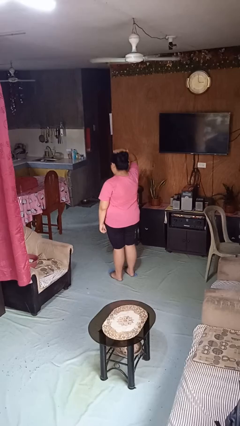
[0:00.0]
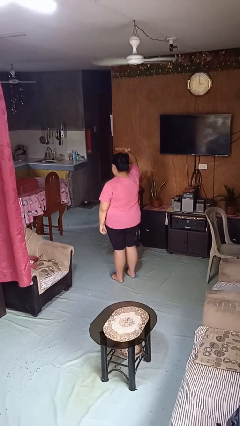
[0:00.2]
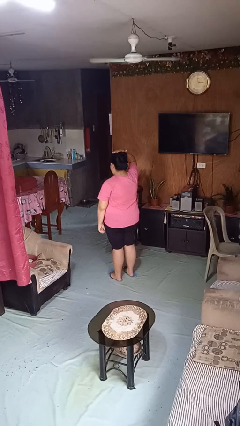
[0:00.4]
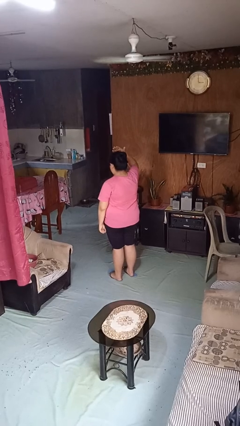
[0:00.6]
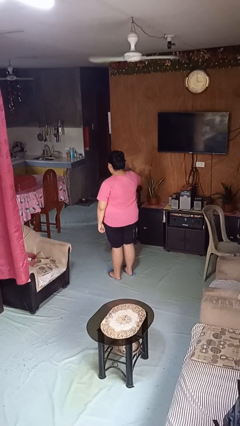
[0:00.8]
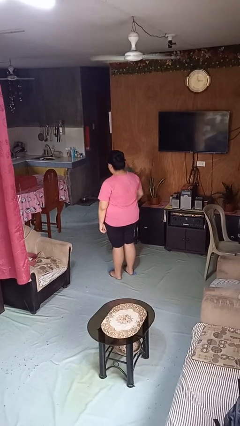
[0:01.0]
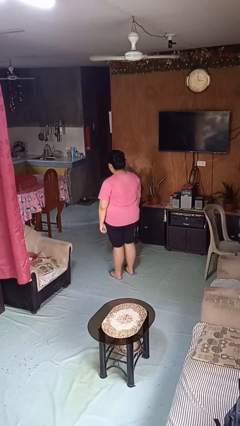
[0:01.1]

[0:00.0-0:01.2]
person pats head

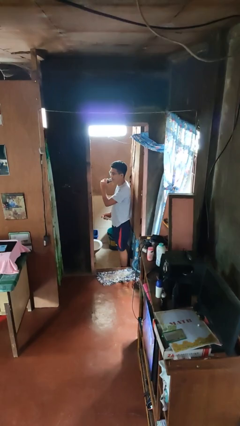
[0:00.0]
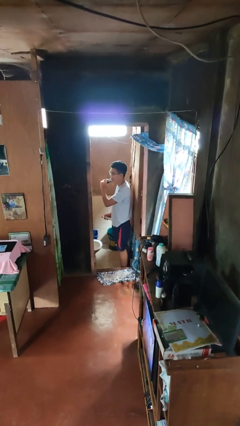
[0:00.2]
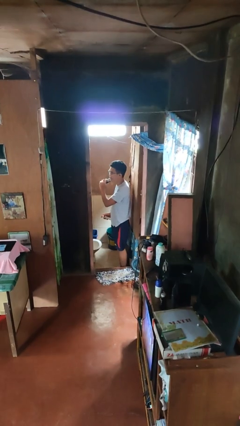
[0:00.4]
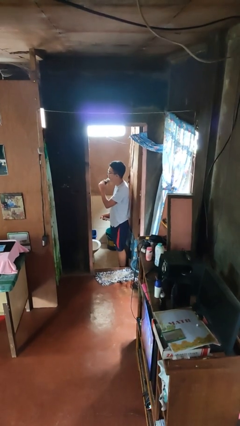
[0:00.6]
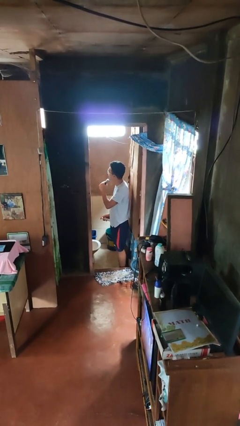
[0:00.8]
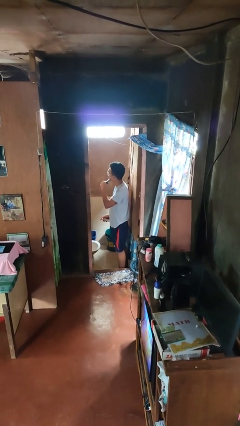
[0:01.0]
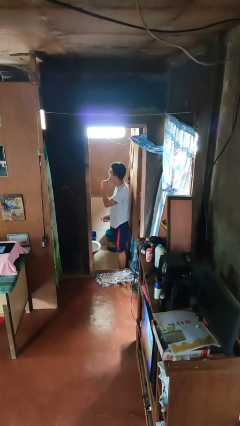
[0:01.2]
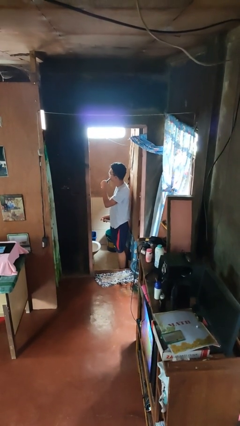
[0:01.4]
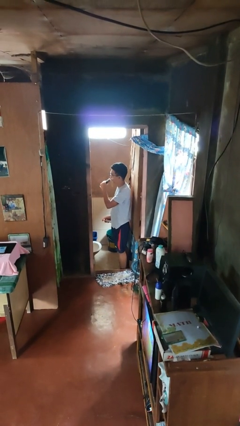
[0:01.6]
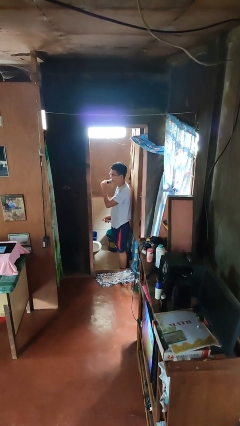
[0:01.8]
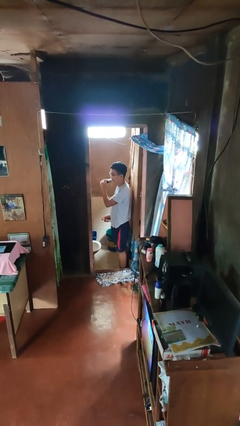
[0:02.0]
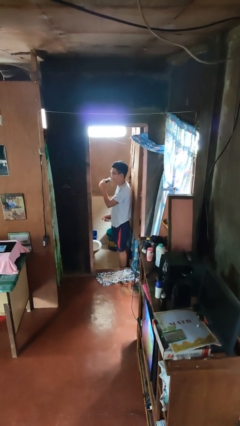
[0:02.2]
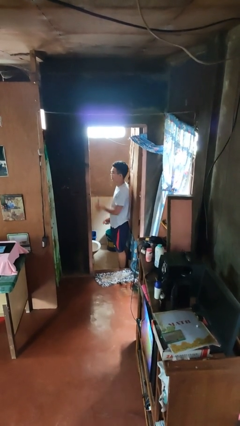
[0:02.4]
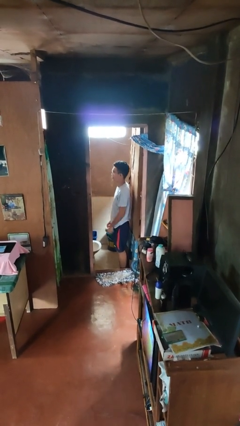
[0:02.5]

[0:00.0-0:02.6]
person shaves face

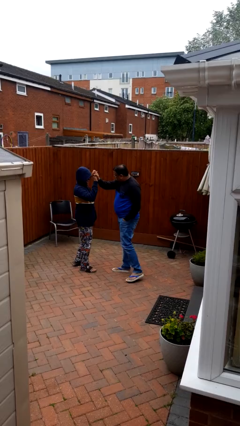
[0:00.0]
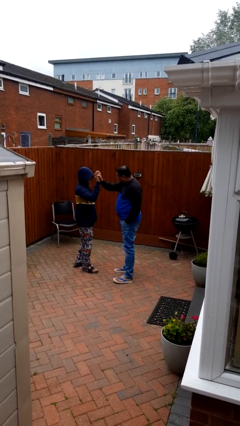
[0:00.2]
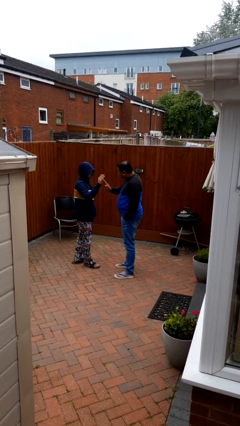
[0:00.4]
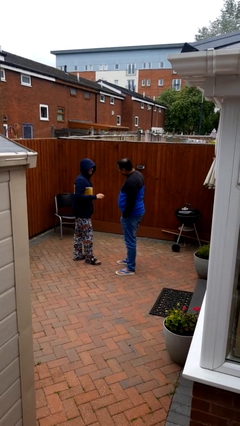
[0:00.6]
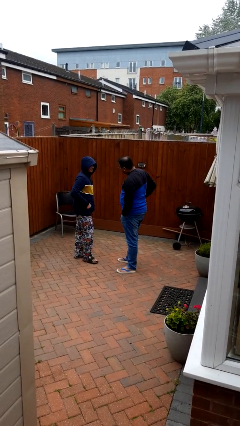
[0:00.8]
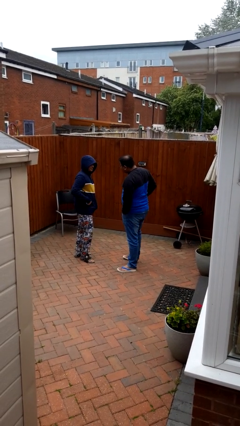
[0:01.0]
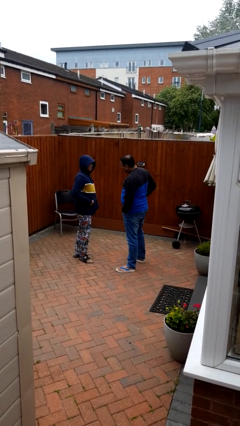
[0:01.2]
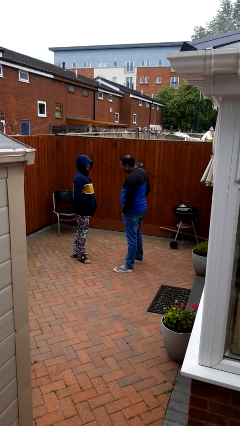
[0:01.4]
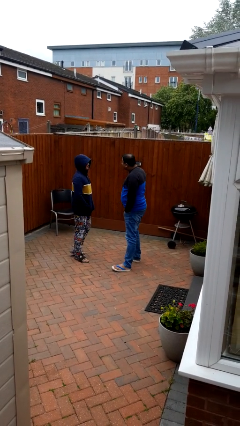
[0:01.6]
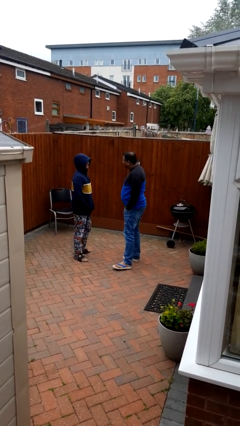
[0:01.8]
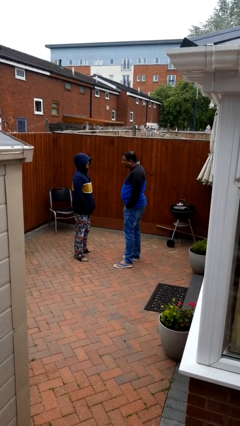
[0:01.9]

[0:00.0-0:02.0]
person highfives hand

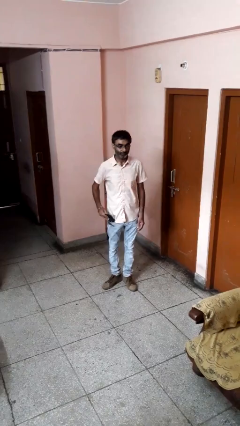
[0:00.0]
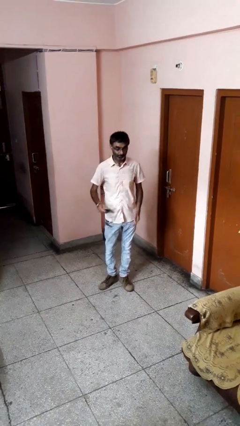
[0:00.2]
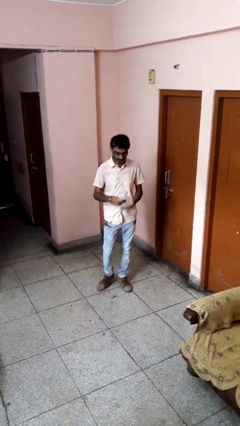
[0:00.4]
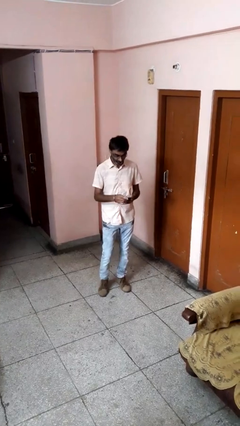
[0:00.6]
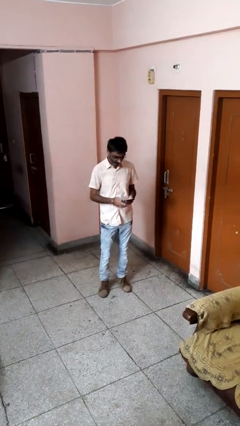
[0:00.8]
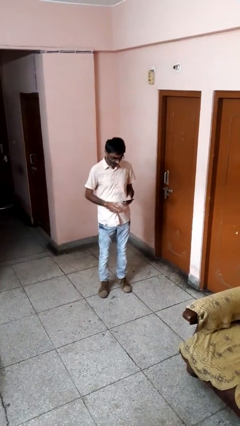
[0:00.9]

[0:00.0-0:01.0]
person takes phone from pocket

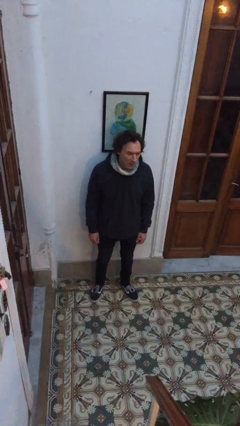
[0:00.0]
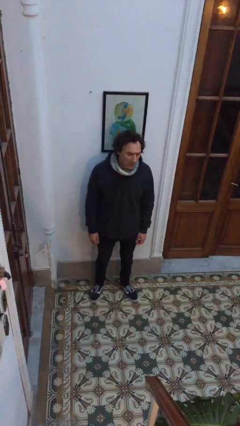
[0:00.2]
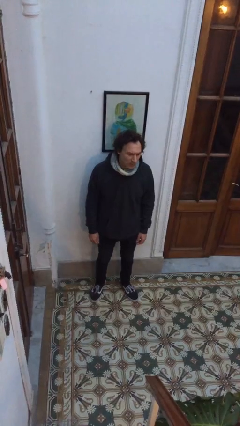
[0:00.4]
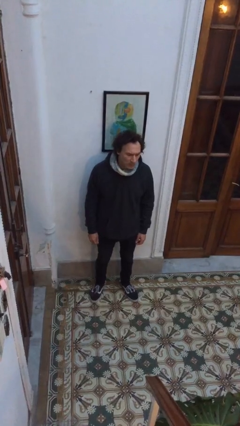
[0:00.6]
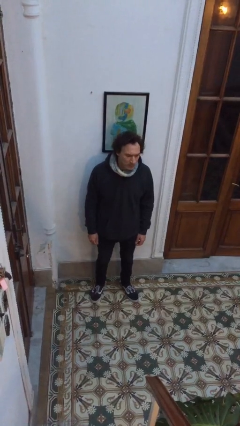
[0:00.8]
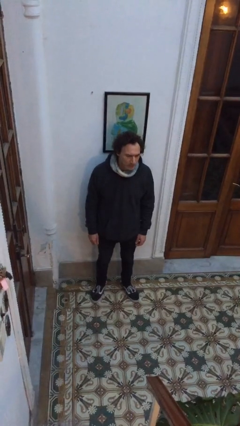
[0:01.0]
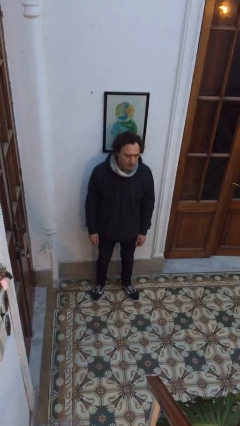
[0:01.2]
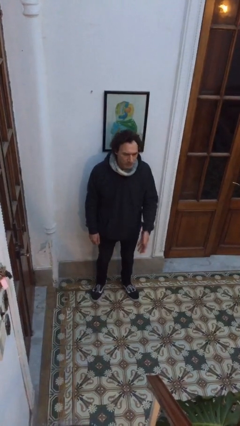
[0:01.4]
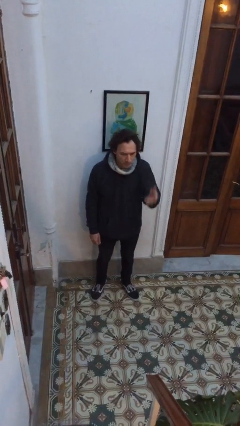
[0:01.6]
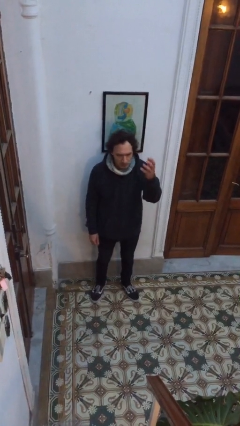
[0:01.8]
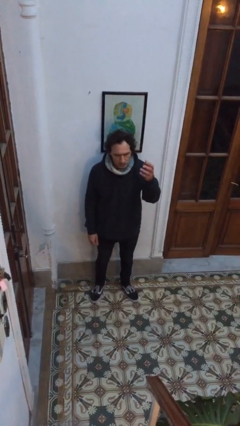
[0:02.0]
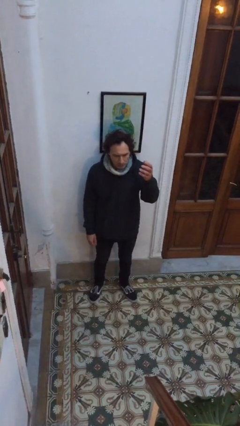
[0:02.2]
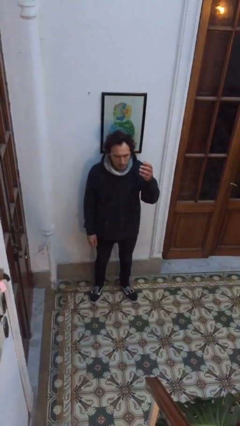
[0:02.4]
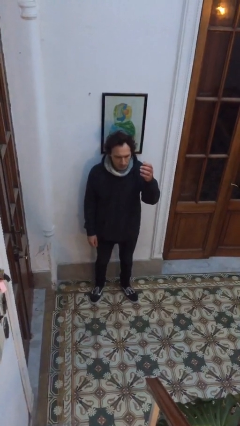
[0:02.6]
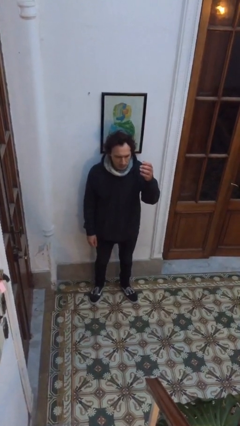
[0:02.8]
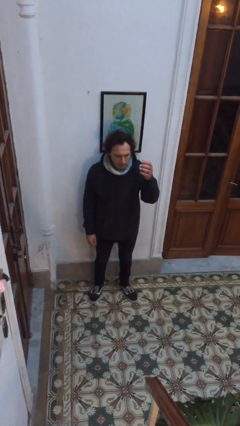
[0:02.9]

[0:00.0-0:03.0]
person gestures swipe up

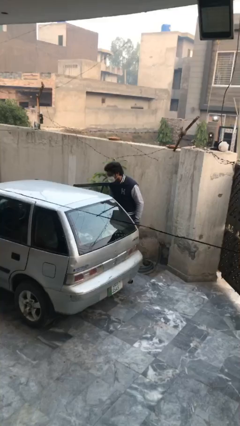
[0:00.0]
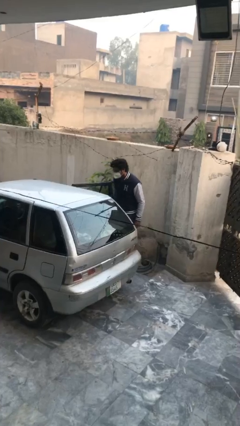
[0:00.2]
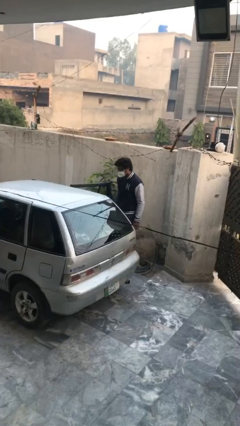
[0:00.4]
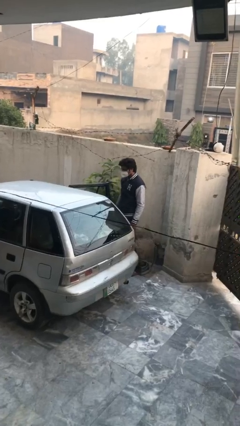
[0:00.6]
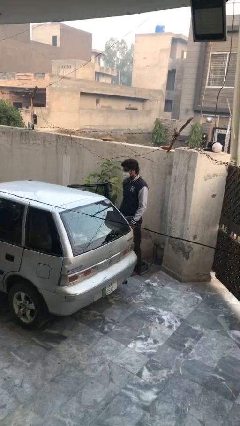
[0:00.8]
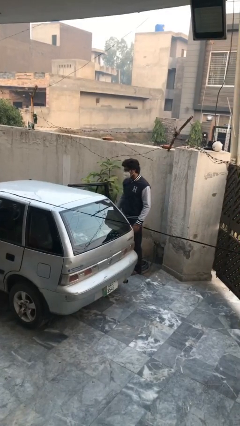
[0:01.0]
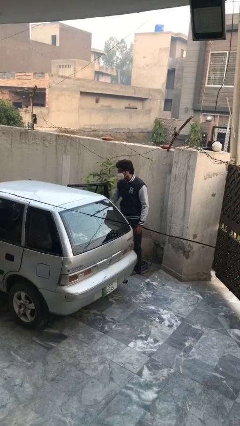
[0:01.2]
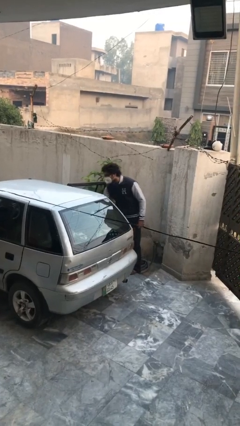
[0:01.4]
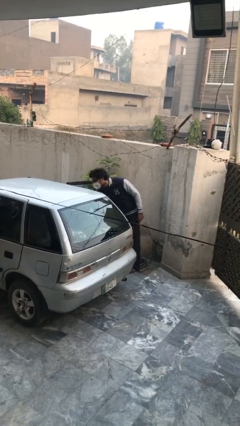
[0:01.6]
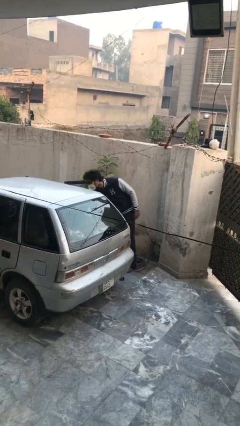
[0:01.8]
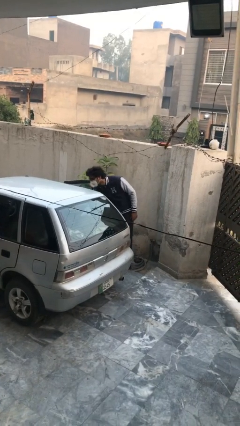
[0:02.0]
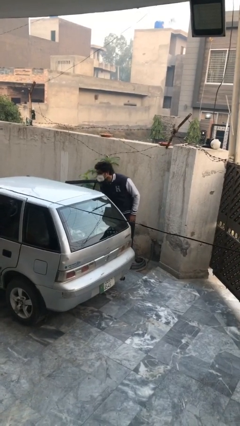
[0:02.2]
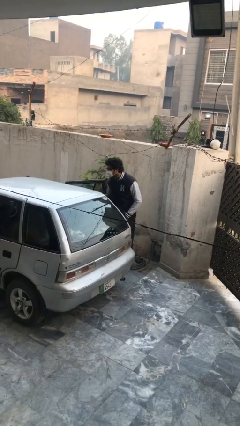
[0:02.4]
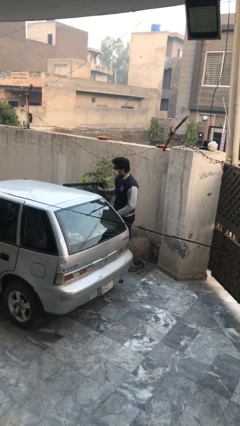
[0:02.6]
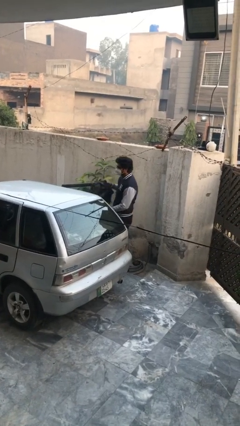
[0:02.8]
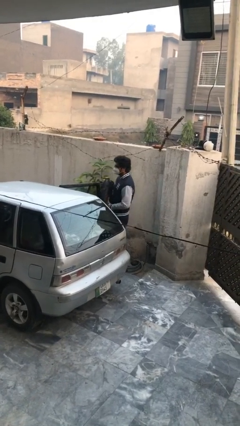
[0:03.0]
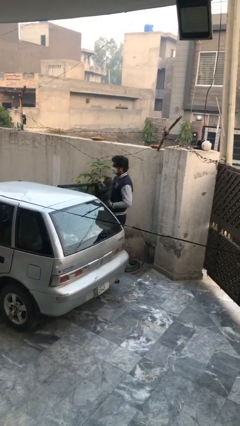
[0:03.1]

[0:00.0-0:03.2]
person unloads car

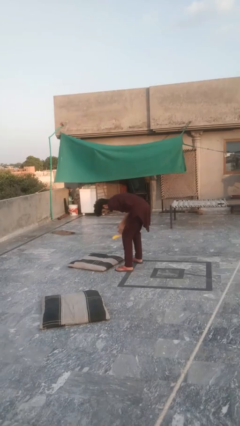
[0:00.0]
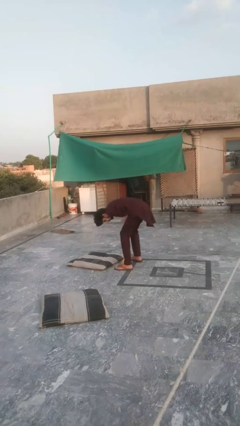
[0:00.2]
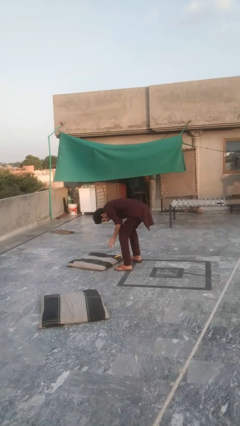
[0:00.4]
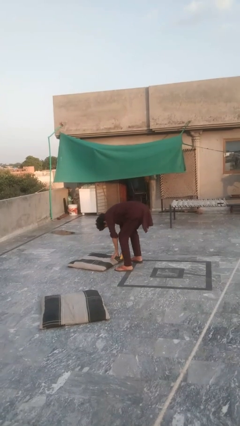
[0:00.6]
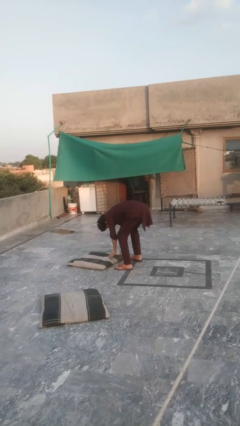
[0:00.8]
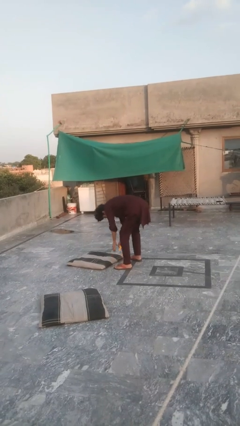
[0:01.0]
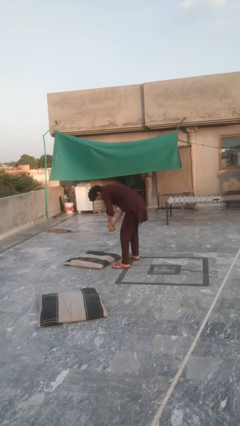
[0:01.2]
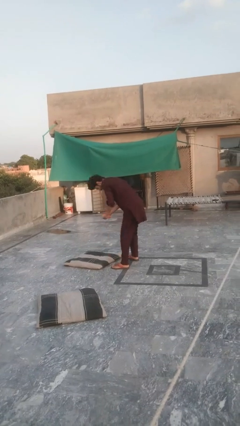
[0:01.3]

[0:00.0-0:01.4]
person catches dropped object

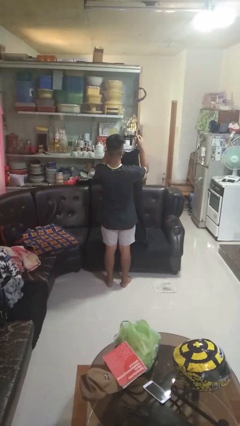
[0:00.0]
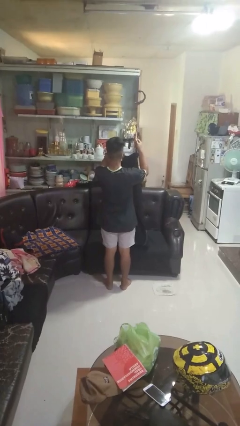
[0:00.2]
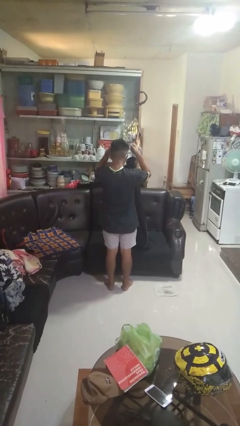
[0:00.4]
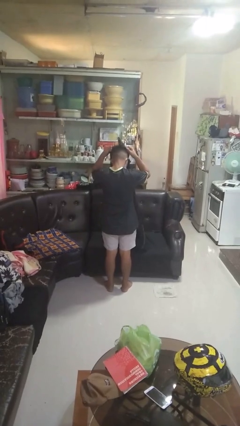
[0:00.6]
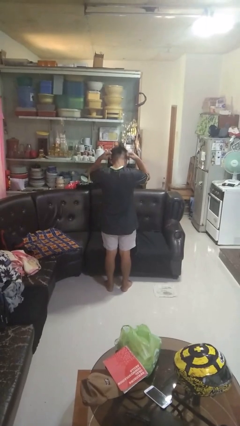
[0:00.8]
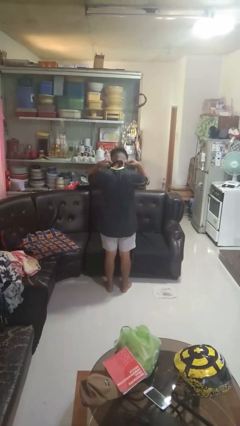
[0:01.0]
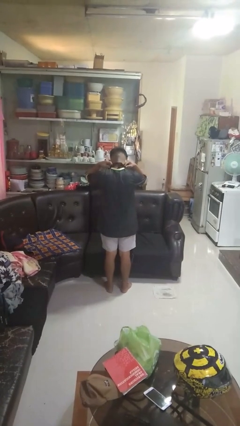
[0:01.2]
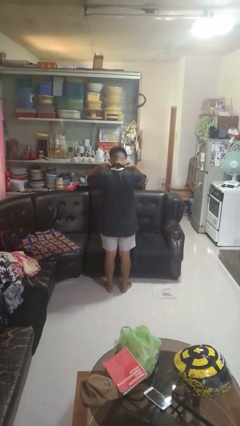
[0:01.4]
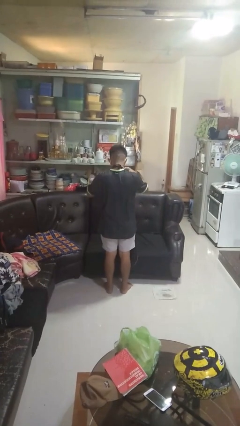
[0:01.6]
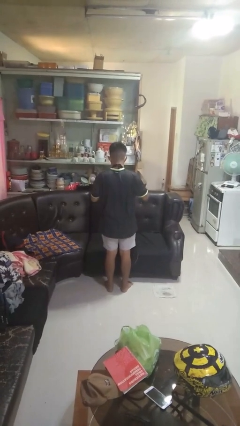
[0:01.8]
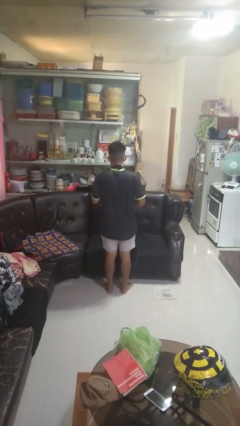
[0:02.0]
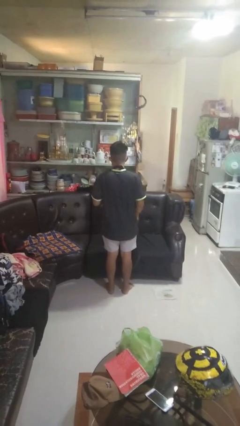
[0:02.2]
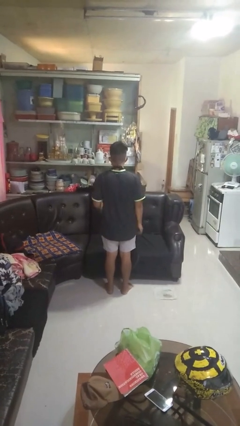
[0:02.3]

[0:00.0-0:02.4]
person puts on apron

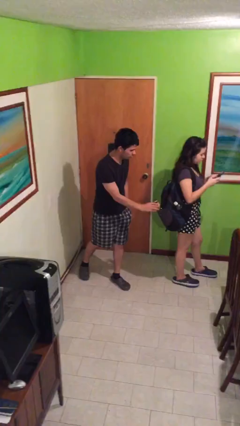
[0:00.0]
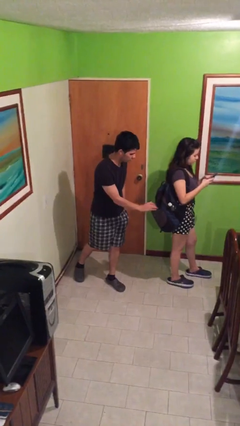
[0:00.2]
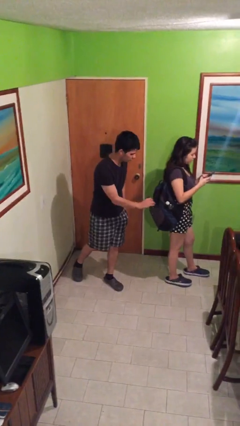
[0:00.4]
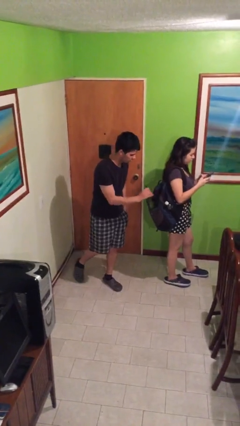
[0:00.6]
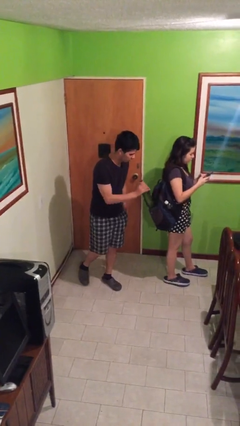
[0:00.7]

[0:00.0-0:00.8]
person steals object from person
